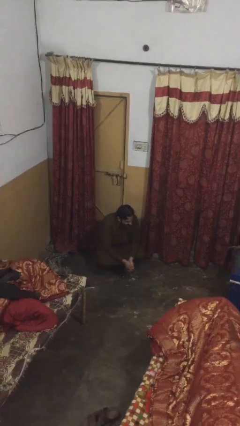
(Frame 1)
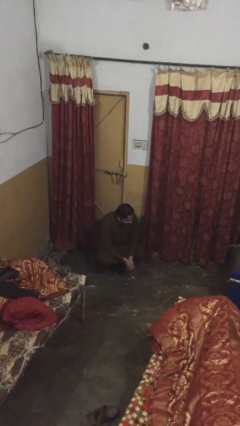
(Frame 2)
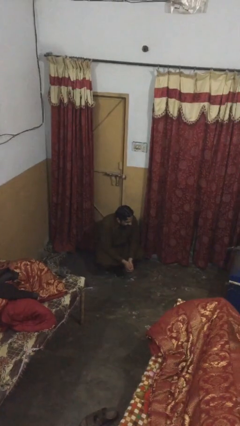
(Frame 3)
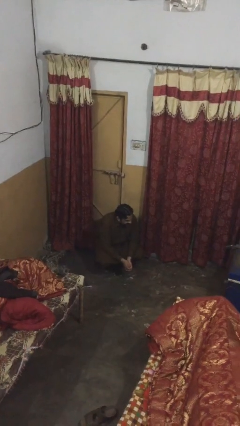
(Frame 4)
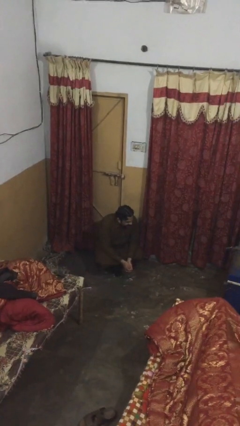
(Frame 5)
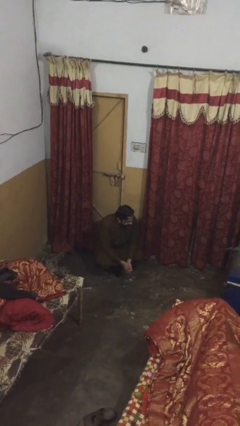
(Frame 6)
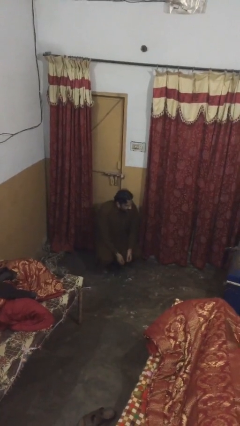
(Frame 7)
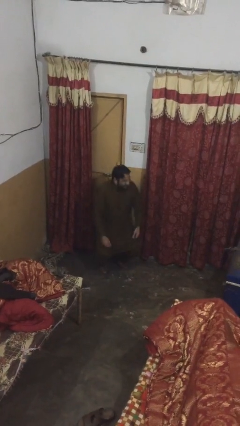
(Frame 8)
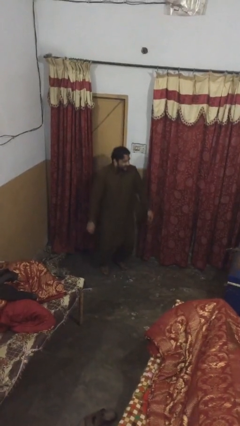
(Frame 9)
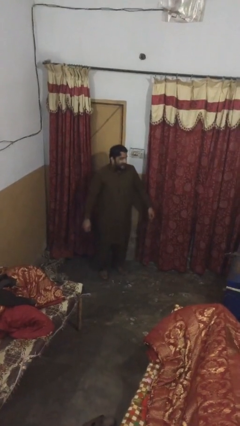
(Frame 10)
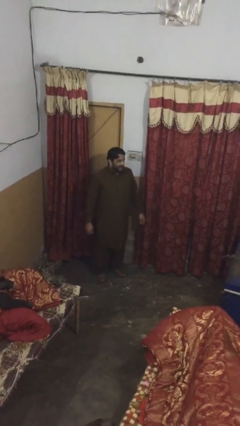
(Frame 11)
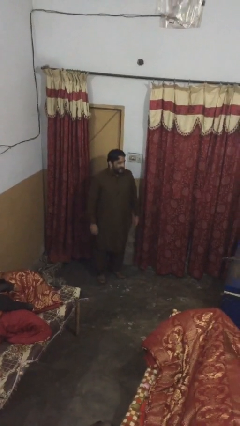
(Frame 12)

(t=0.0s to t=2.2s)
person stands up

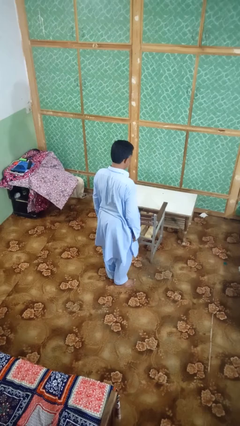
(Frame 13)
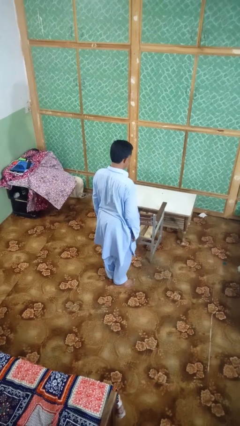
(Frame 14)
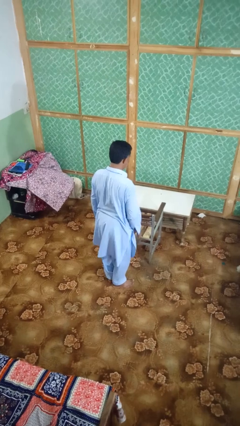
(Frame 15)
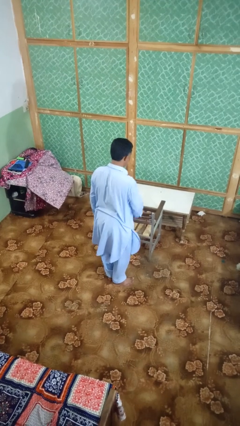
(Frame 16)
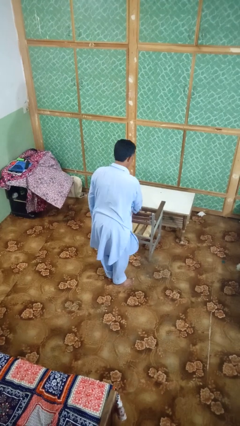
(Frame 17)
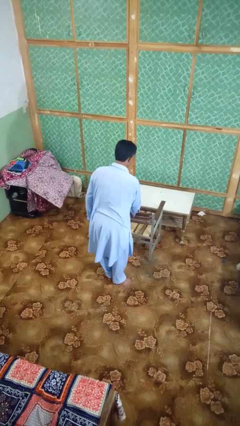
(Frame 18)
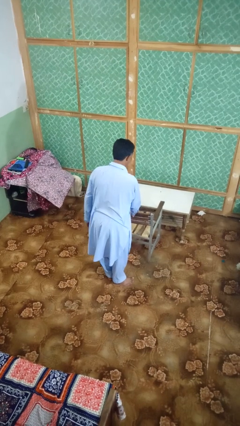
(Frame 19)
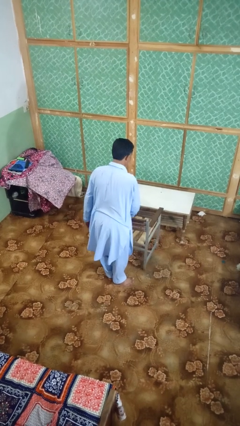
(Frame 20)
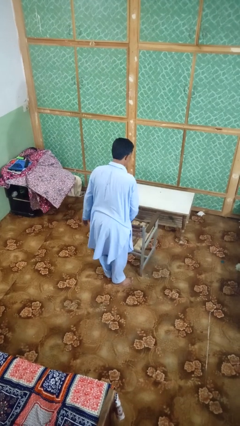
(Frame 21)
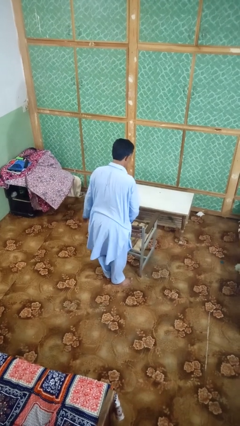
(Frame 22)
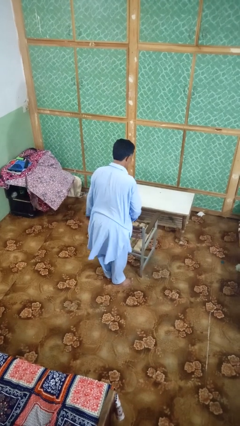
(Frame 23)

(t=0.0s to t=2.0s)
person pulls out chair

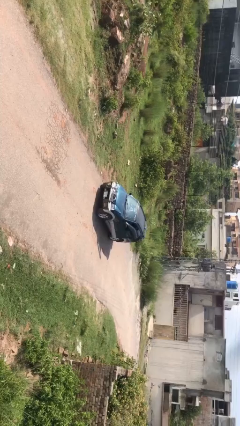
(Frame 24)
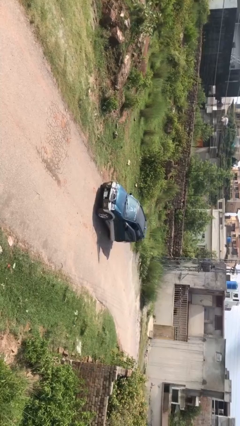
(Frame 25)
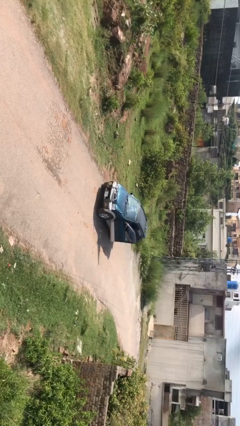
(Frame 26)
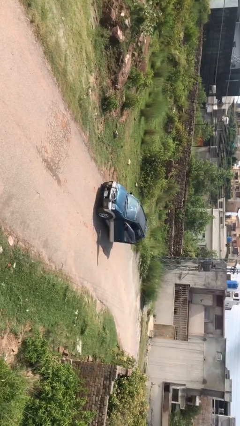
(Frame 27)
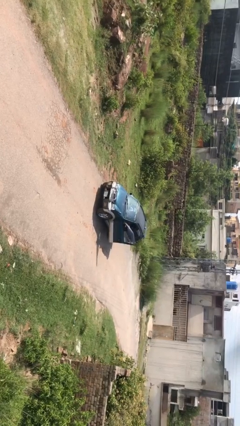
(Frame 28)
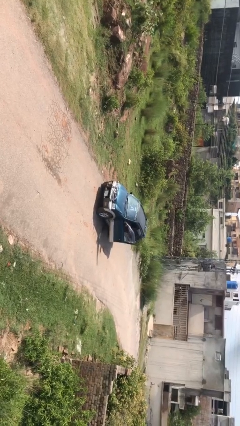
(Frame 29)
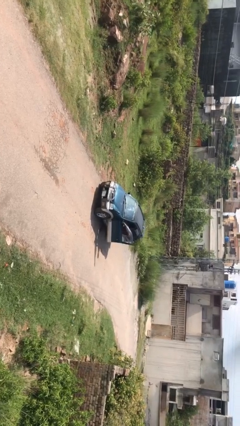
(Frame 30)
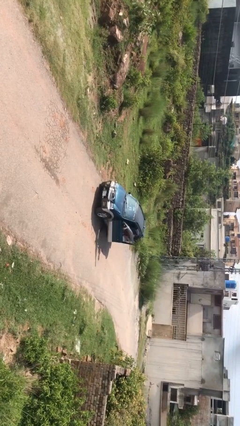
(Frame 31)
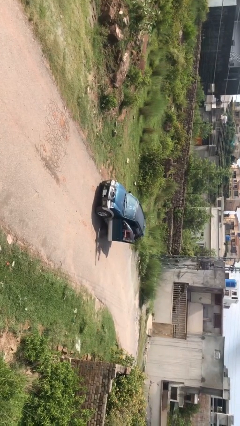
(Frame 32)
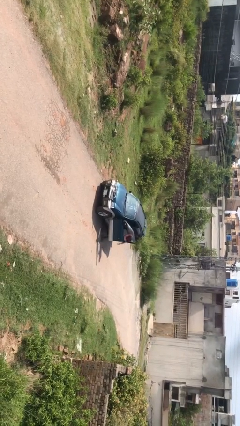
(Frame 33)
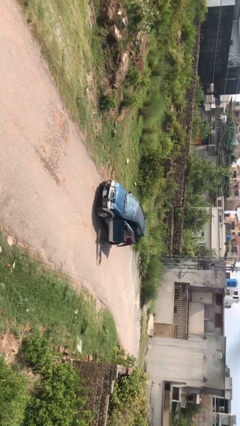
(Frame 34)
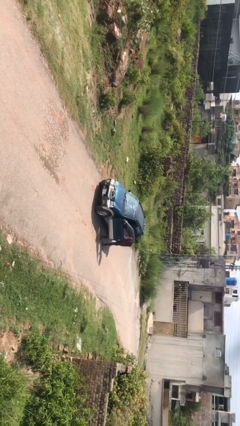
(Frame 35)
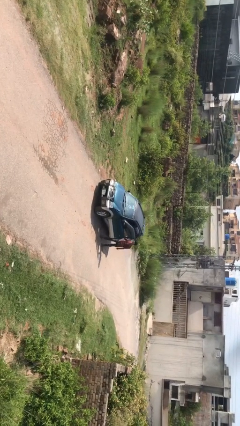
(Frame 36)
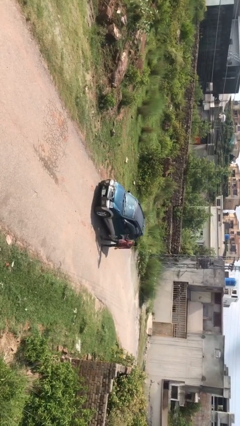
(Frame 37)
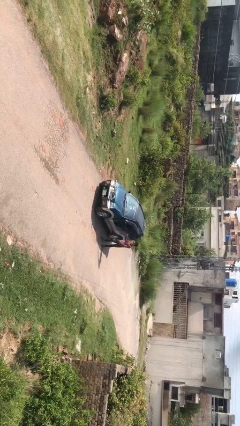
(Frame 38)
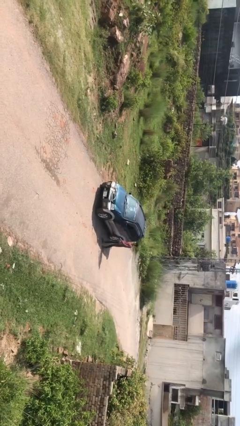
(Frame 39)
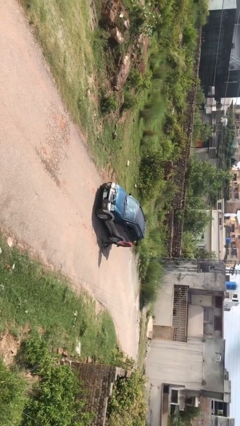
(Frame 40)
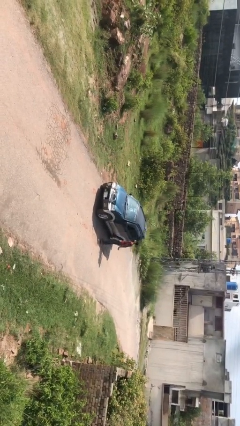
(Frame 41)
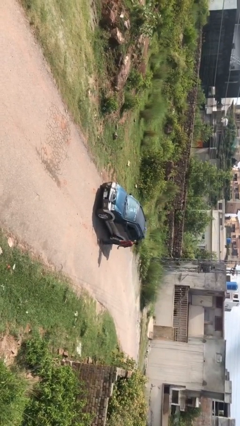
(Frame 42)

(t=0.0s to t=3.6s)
car drops off person

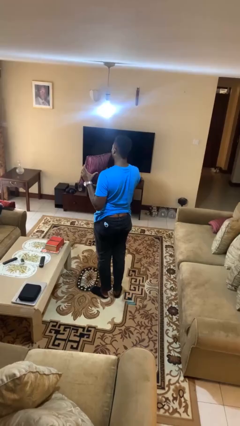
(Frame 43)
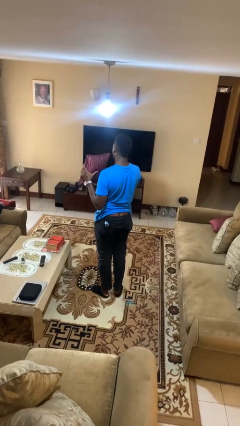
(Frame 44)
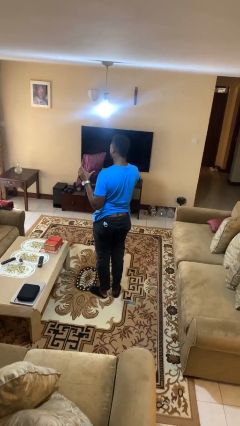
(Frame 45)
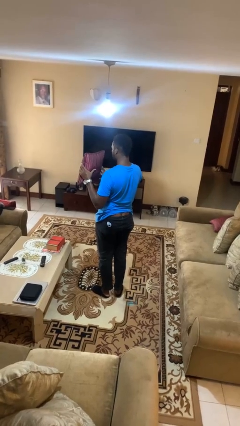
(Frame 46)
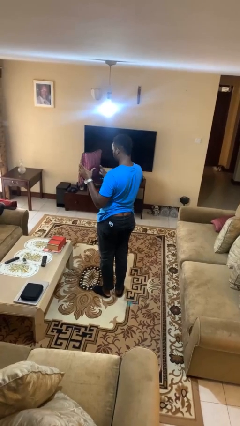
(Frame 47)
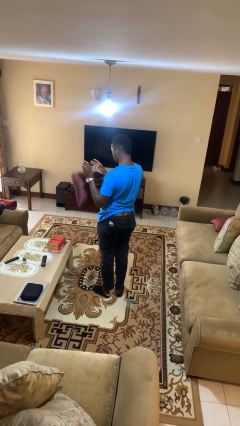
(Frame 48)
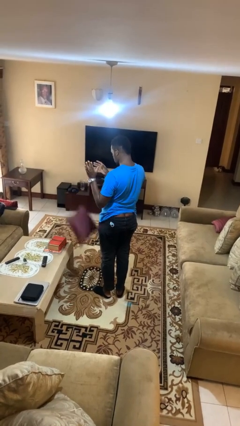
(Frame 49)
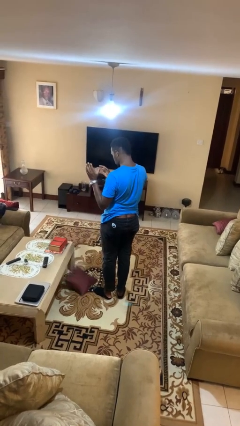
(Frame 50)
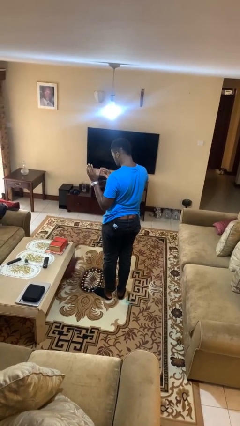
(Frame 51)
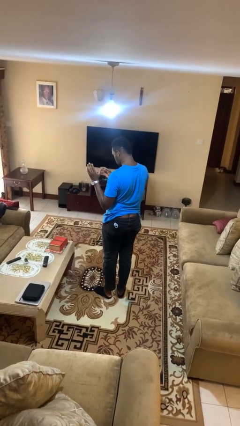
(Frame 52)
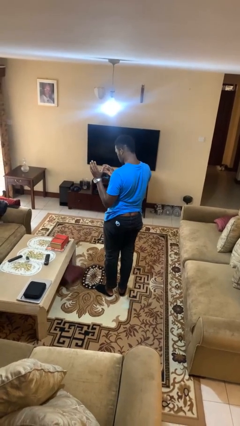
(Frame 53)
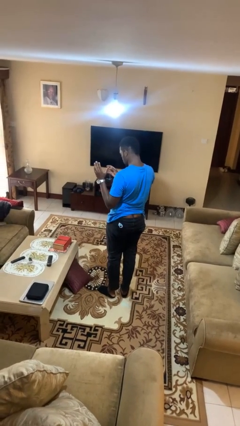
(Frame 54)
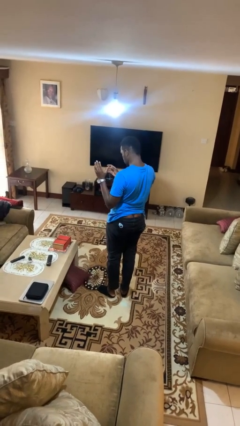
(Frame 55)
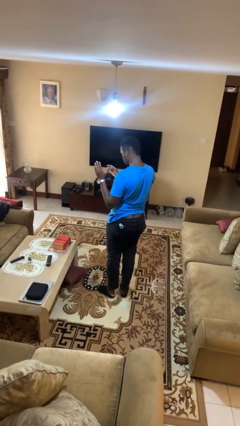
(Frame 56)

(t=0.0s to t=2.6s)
person drops object

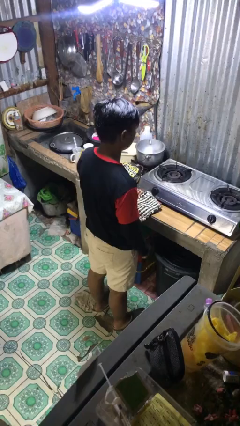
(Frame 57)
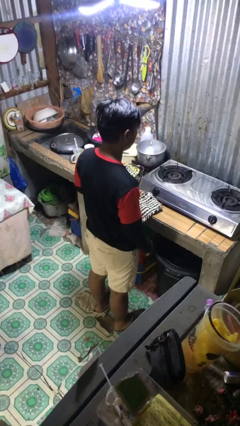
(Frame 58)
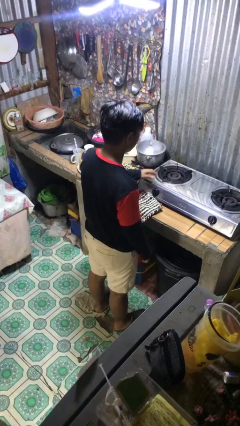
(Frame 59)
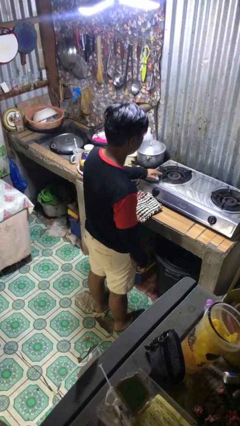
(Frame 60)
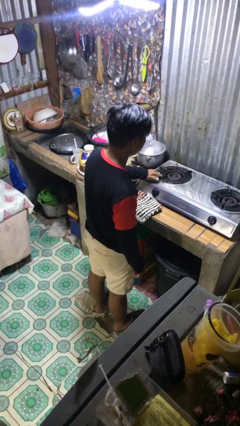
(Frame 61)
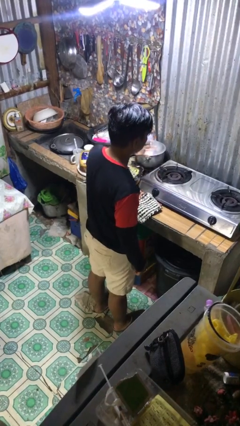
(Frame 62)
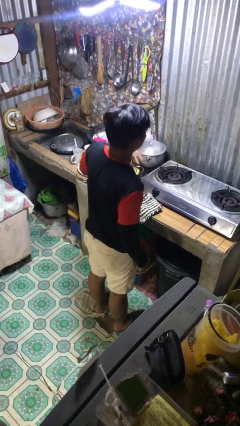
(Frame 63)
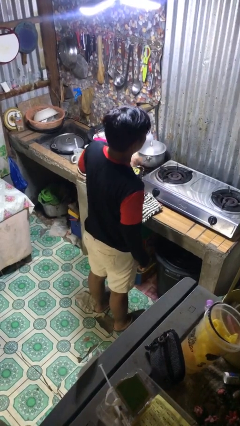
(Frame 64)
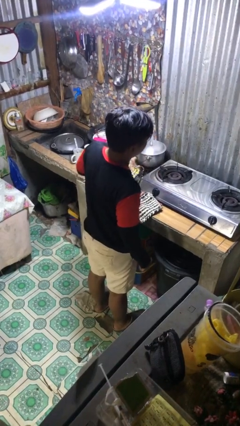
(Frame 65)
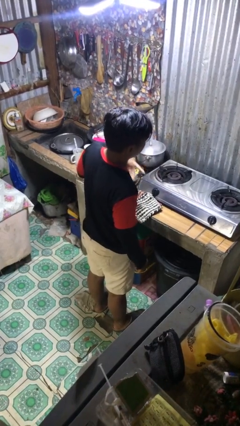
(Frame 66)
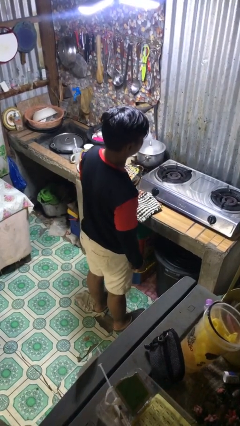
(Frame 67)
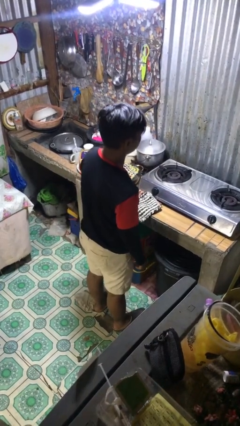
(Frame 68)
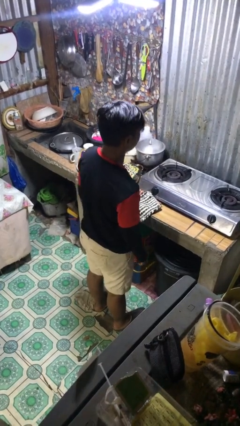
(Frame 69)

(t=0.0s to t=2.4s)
person burns hand

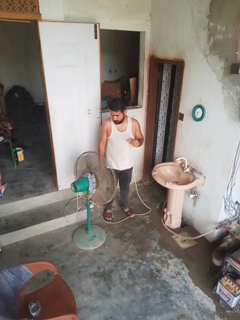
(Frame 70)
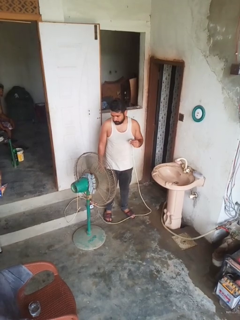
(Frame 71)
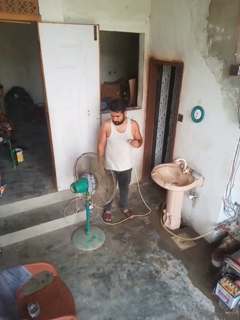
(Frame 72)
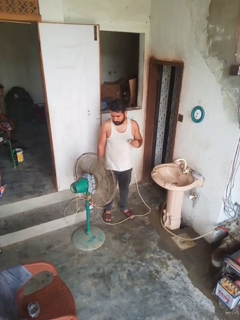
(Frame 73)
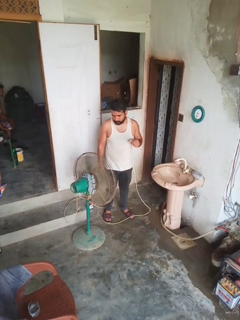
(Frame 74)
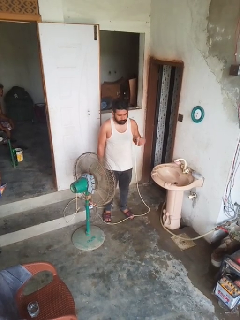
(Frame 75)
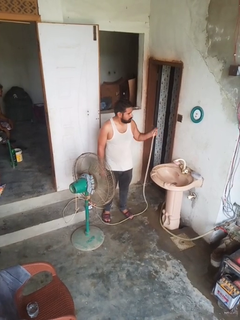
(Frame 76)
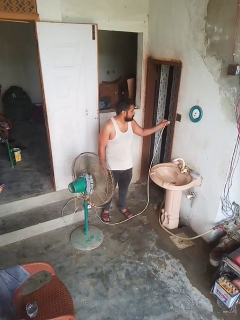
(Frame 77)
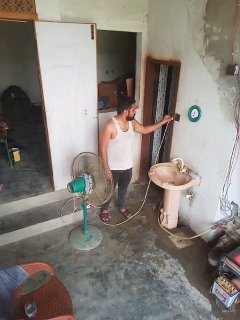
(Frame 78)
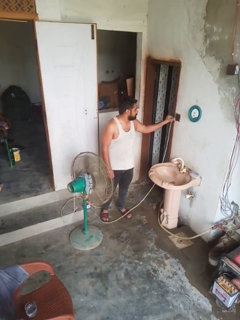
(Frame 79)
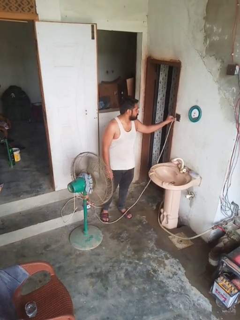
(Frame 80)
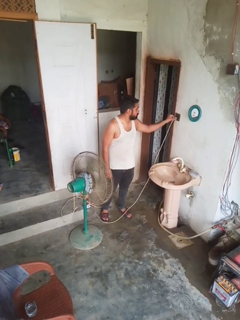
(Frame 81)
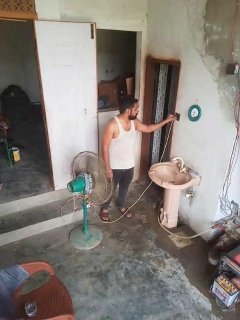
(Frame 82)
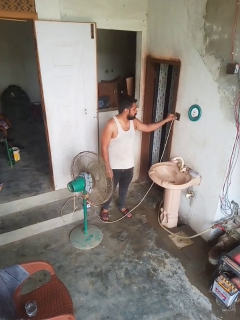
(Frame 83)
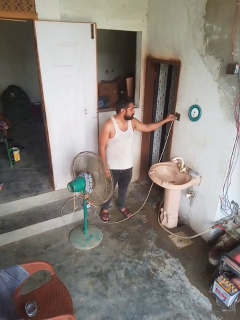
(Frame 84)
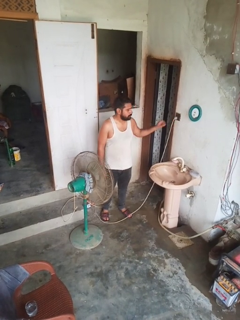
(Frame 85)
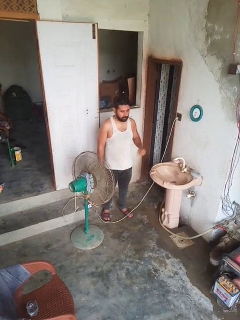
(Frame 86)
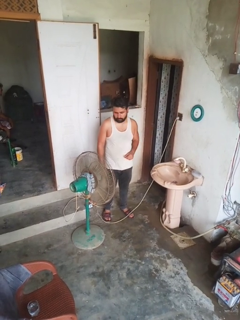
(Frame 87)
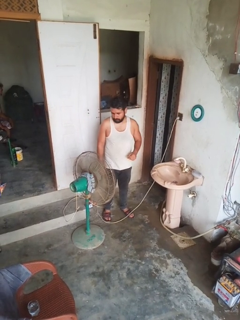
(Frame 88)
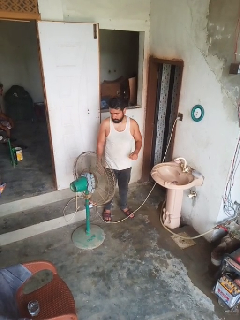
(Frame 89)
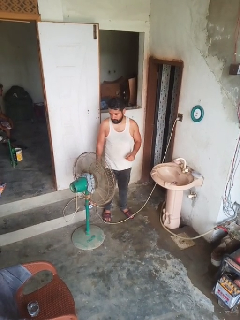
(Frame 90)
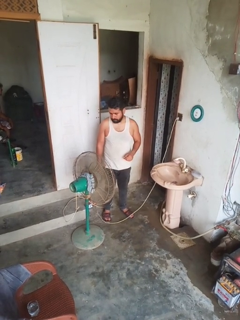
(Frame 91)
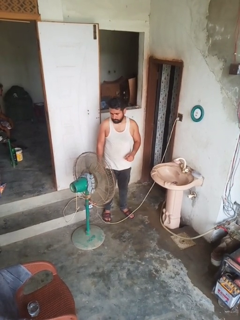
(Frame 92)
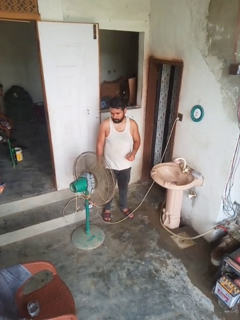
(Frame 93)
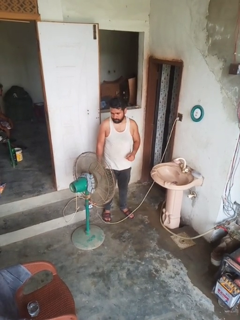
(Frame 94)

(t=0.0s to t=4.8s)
person turns on fan

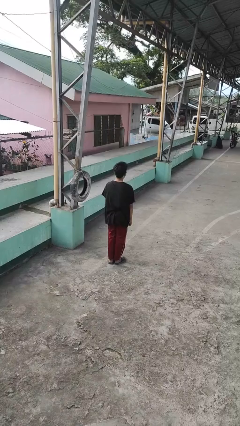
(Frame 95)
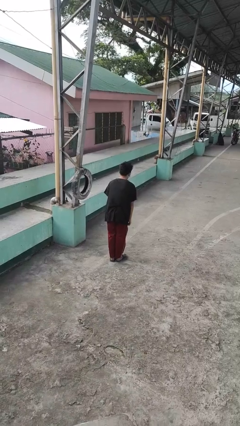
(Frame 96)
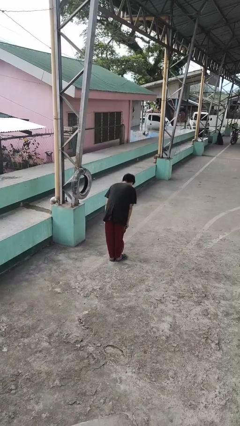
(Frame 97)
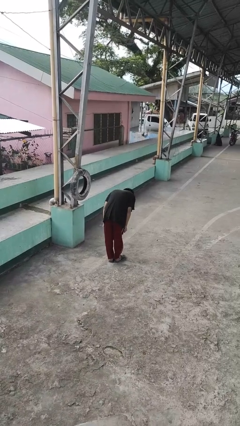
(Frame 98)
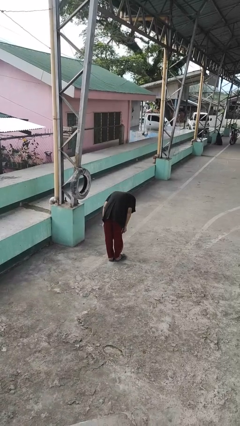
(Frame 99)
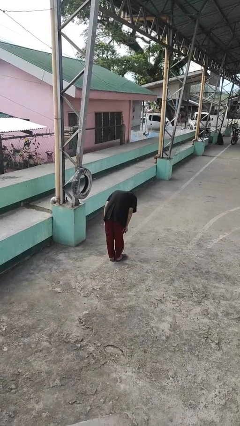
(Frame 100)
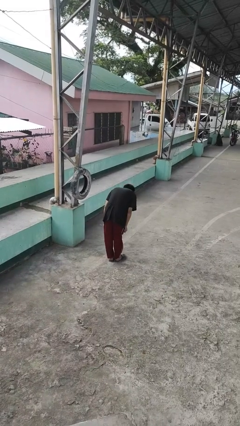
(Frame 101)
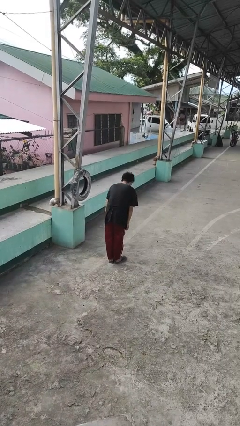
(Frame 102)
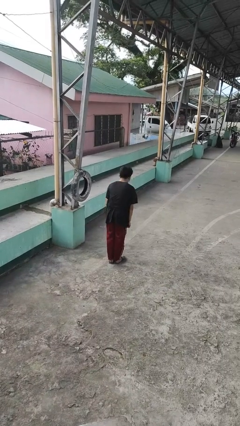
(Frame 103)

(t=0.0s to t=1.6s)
person bows
